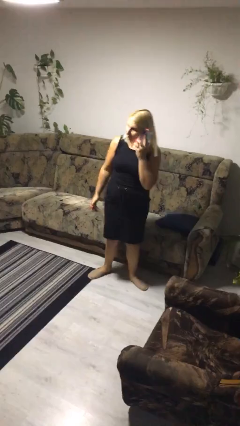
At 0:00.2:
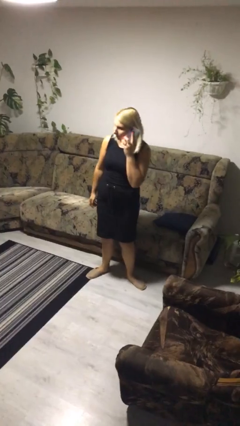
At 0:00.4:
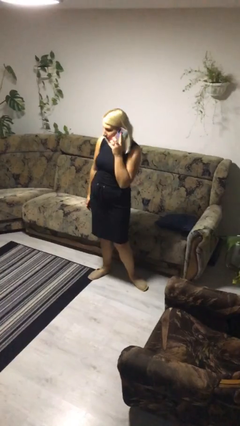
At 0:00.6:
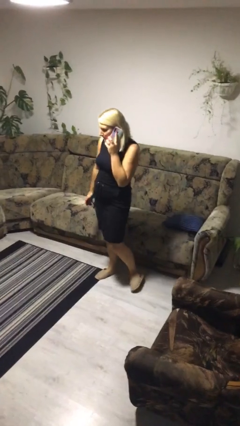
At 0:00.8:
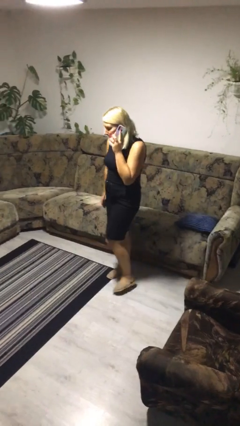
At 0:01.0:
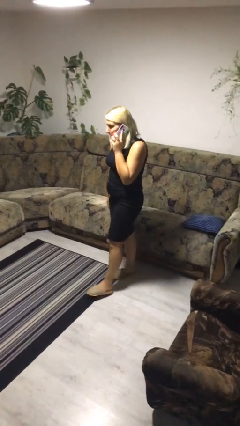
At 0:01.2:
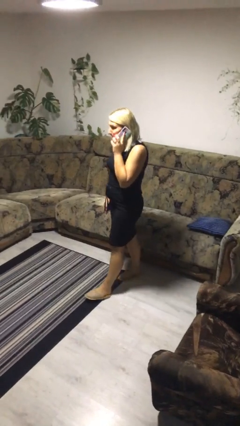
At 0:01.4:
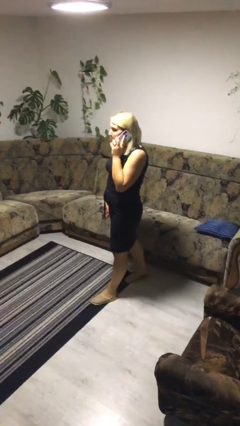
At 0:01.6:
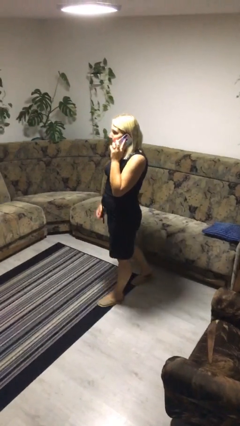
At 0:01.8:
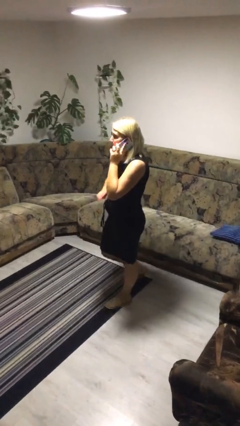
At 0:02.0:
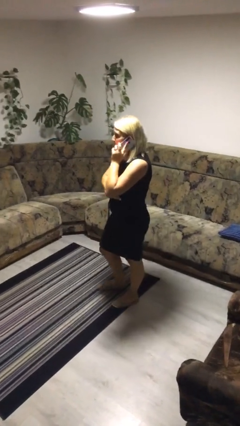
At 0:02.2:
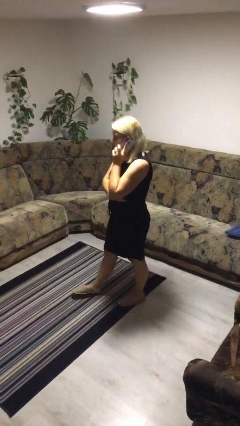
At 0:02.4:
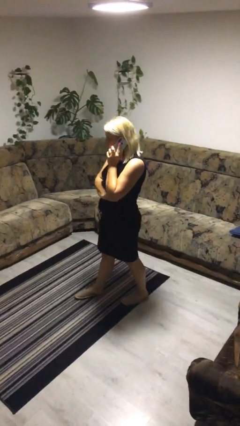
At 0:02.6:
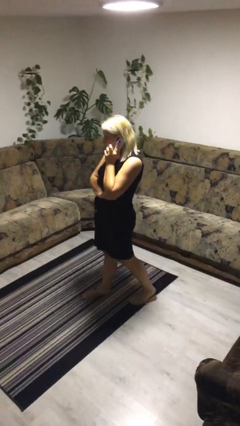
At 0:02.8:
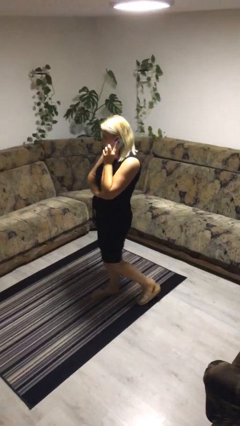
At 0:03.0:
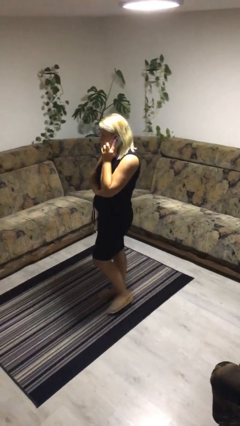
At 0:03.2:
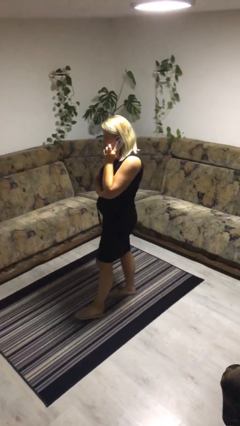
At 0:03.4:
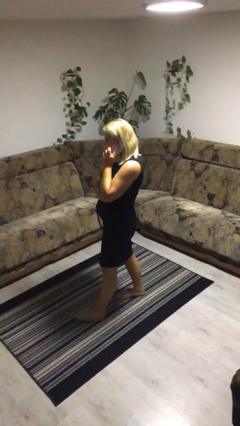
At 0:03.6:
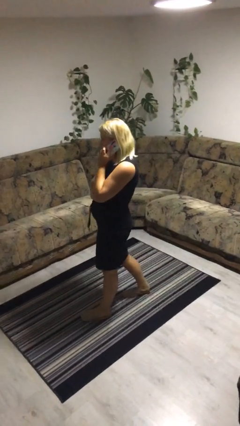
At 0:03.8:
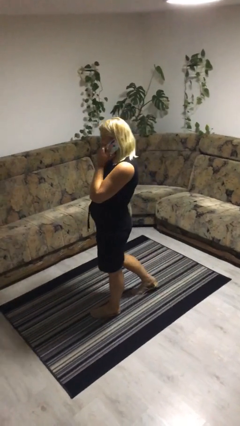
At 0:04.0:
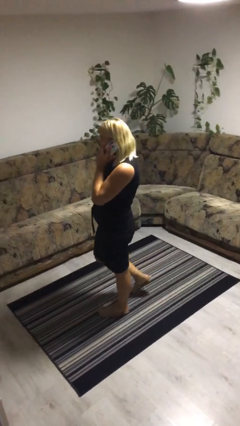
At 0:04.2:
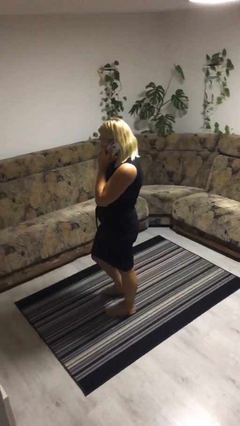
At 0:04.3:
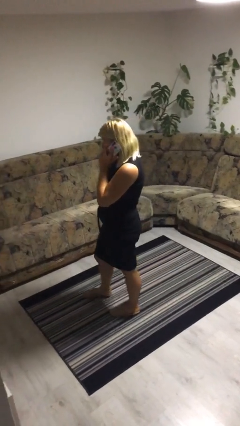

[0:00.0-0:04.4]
person talks on phone

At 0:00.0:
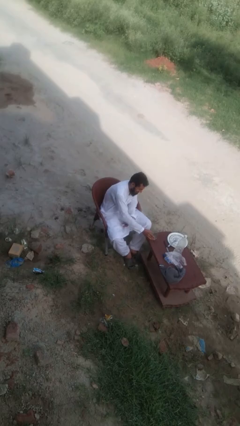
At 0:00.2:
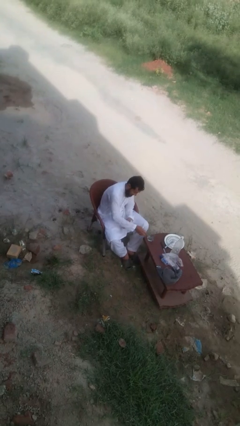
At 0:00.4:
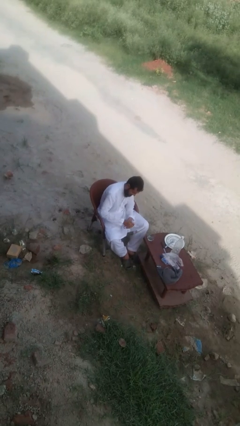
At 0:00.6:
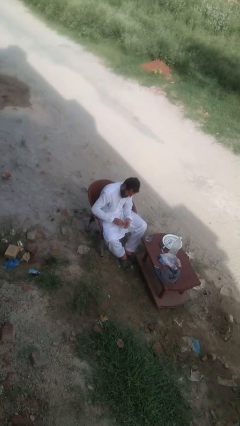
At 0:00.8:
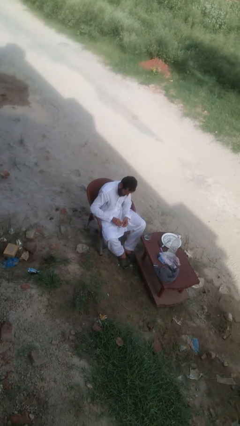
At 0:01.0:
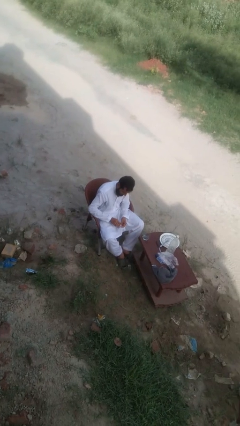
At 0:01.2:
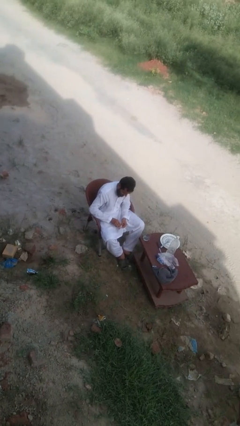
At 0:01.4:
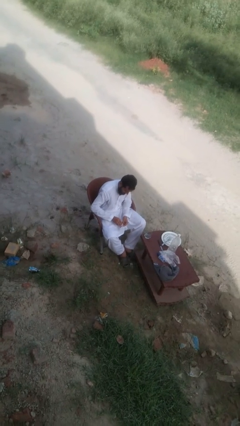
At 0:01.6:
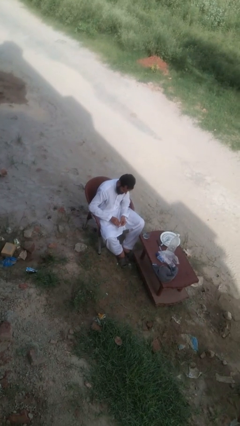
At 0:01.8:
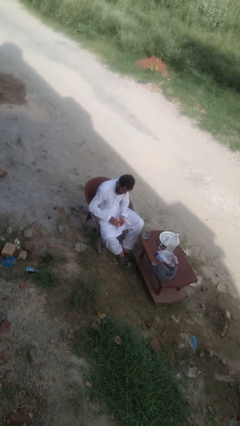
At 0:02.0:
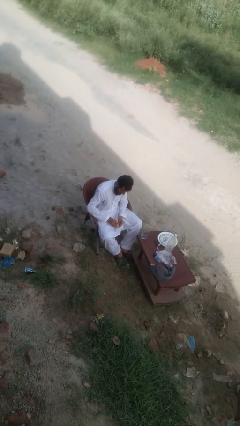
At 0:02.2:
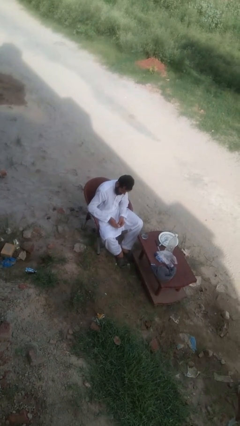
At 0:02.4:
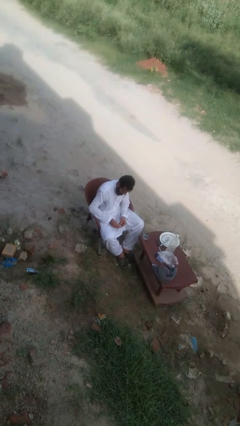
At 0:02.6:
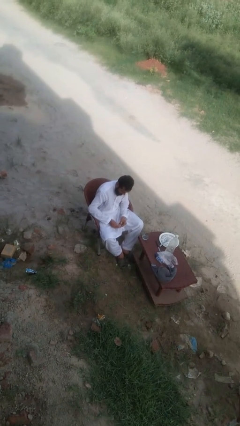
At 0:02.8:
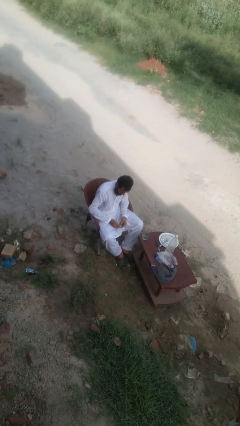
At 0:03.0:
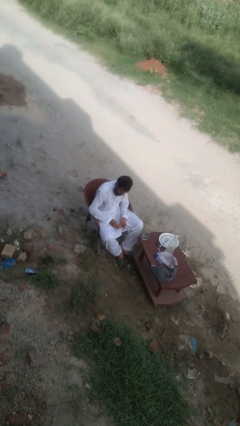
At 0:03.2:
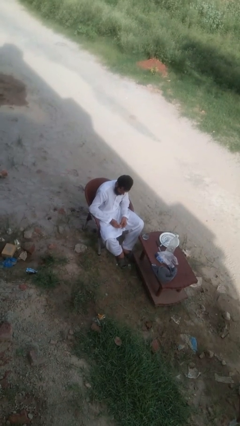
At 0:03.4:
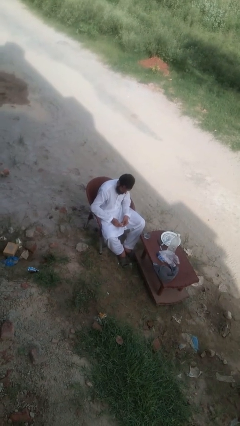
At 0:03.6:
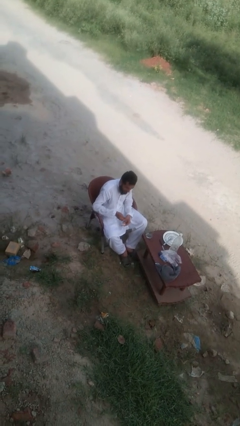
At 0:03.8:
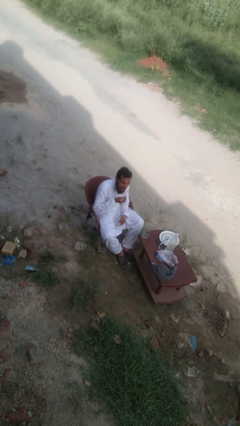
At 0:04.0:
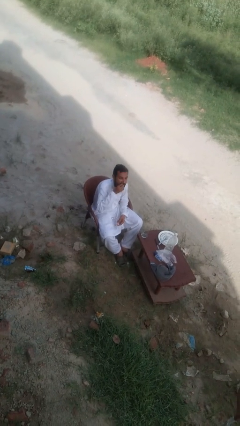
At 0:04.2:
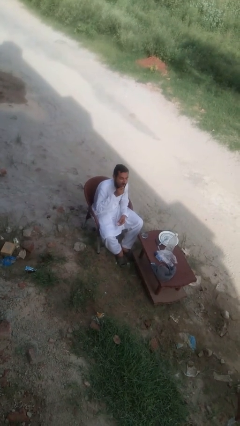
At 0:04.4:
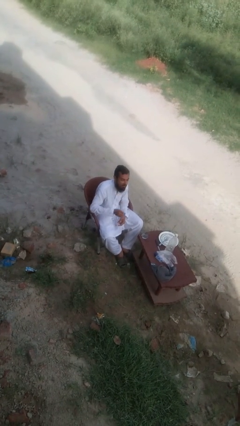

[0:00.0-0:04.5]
person takes medicine pills

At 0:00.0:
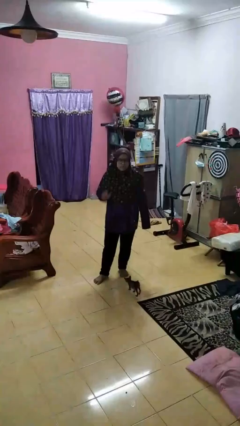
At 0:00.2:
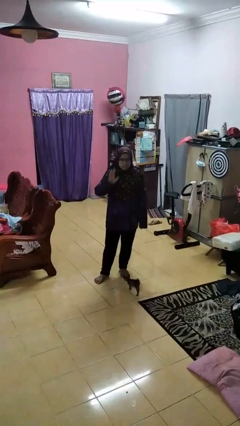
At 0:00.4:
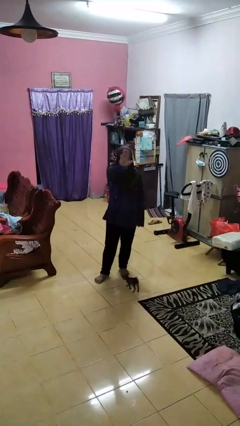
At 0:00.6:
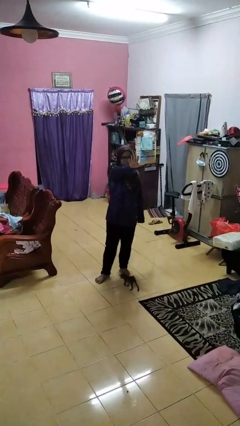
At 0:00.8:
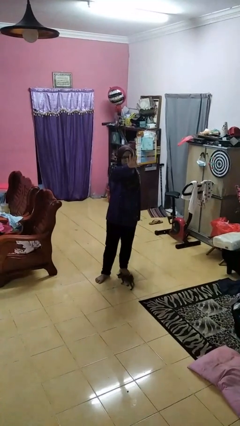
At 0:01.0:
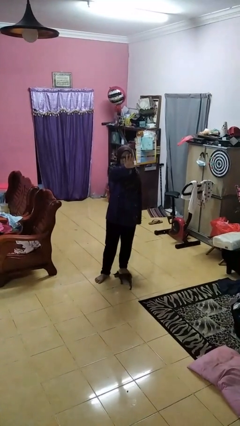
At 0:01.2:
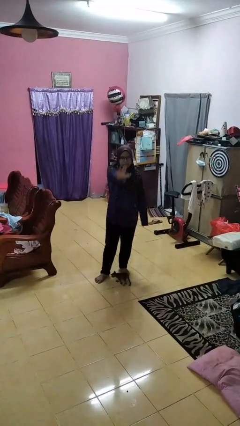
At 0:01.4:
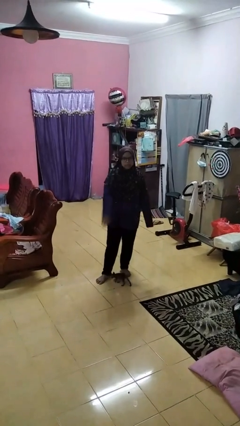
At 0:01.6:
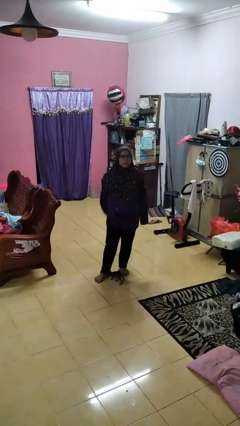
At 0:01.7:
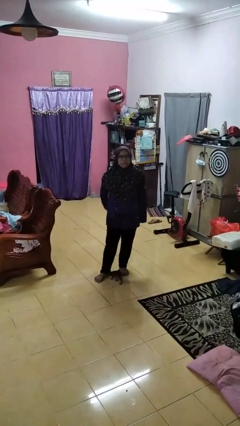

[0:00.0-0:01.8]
person gestures stop

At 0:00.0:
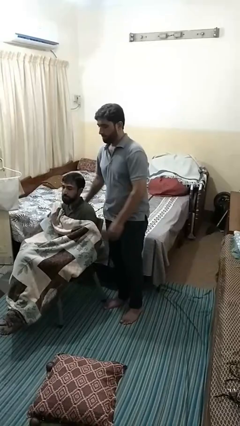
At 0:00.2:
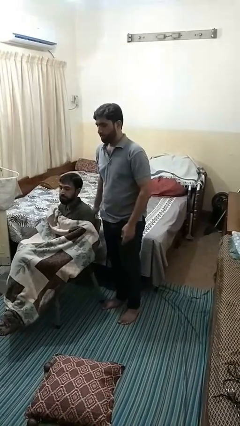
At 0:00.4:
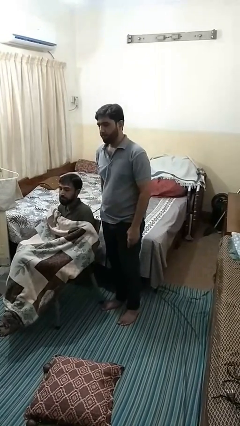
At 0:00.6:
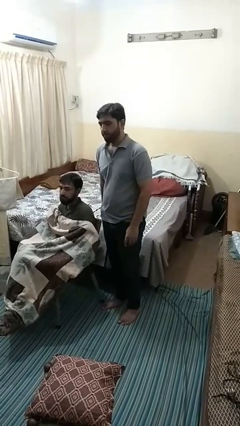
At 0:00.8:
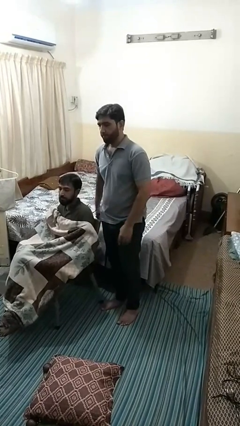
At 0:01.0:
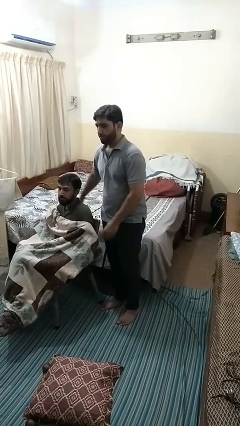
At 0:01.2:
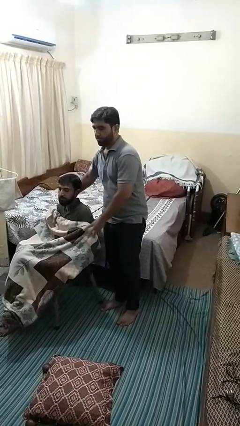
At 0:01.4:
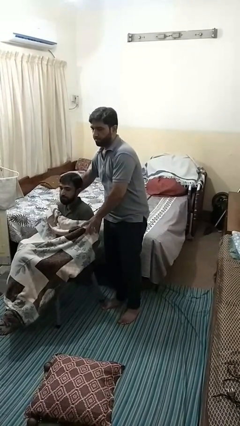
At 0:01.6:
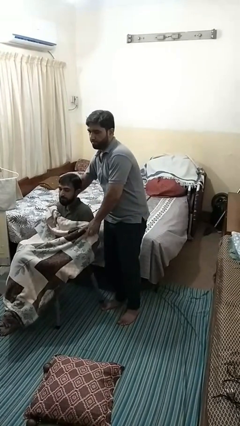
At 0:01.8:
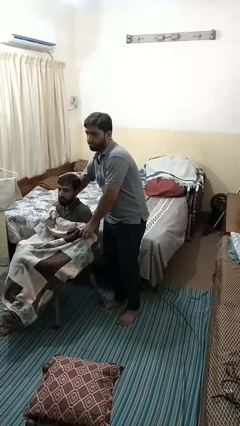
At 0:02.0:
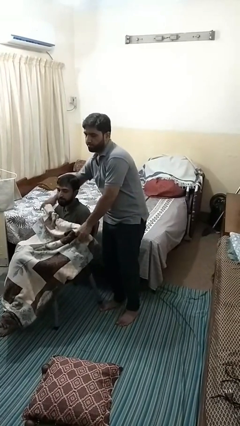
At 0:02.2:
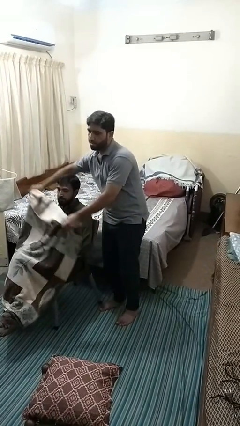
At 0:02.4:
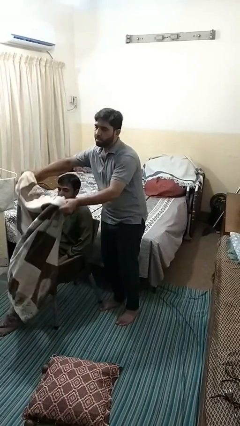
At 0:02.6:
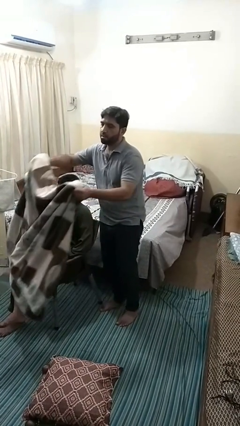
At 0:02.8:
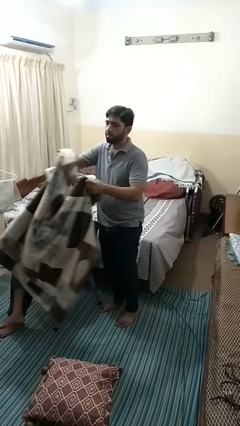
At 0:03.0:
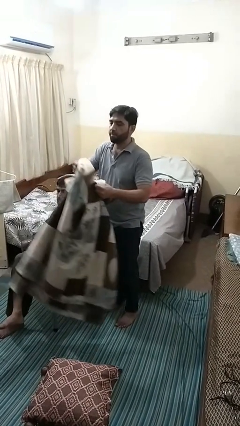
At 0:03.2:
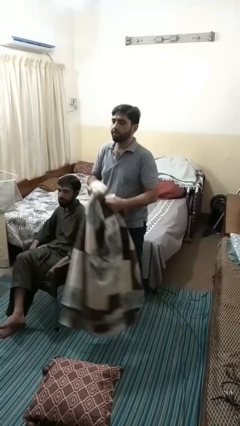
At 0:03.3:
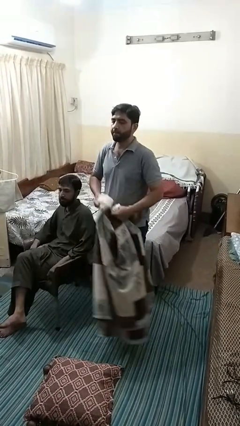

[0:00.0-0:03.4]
person uncovers friend with blanket

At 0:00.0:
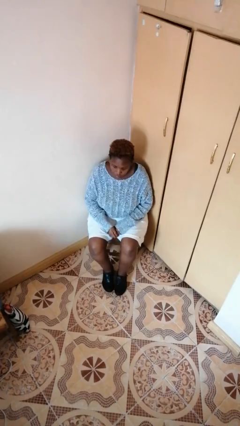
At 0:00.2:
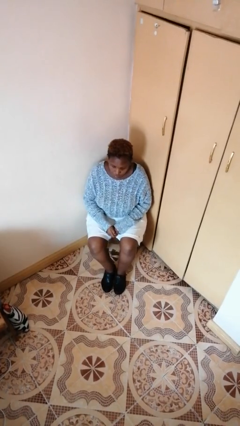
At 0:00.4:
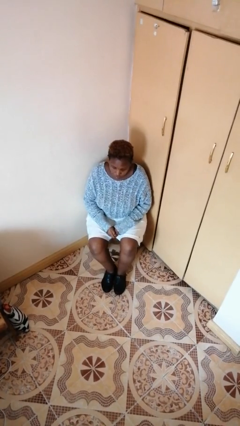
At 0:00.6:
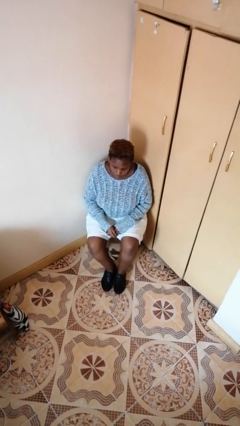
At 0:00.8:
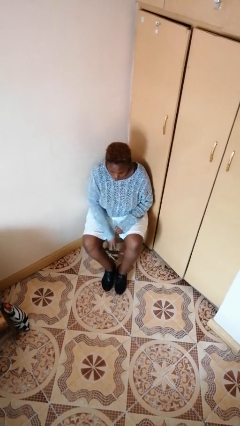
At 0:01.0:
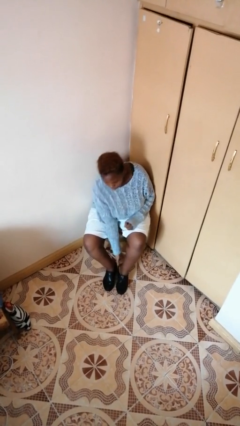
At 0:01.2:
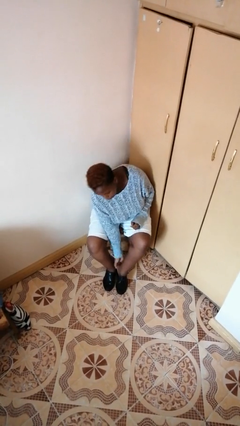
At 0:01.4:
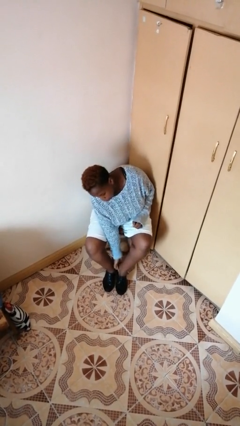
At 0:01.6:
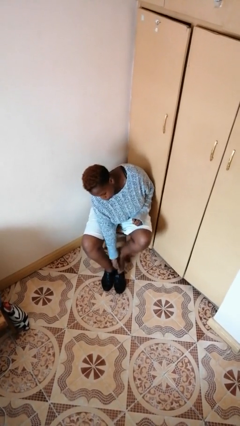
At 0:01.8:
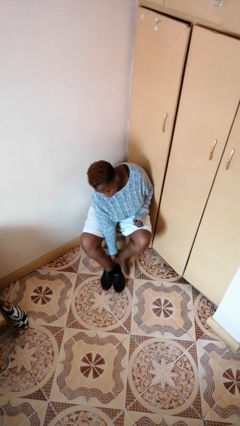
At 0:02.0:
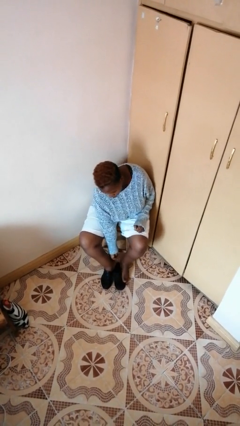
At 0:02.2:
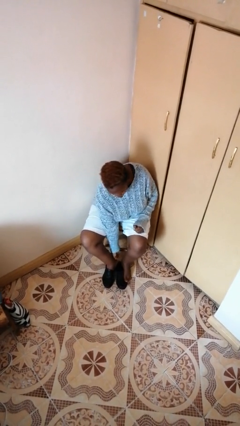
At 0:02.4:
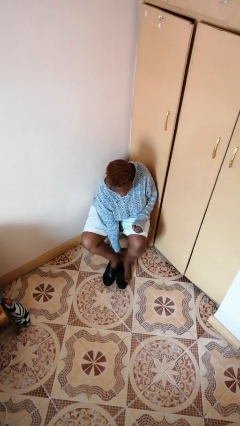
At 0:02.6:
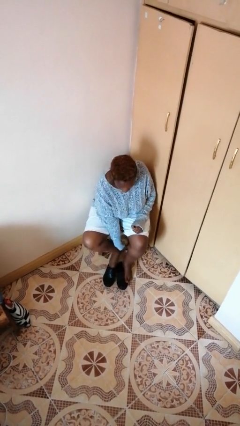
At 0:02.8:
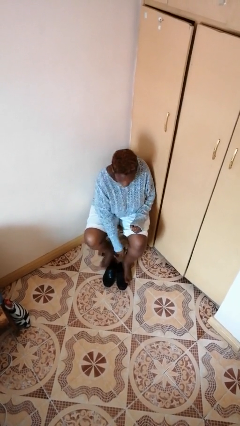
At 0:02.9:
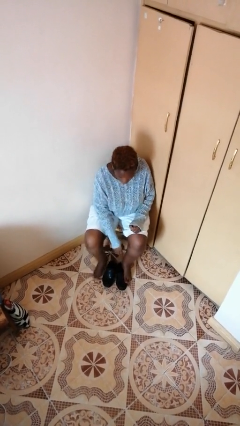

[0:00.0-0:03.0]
person takes off shoes

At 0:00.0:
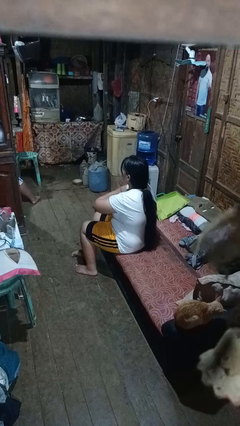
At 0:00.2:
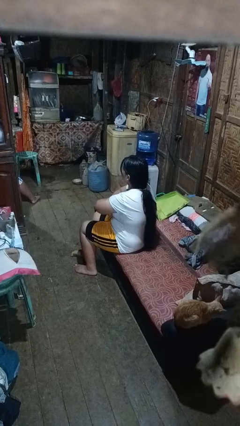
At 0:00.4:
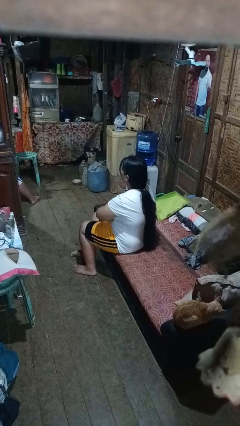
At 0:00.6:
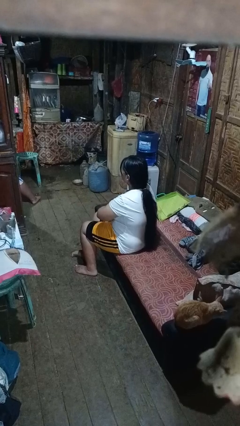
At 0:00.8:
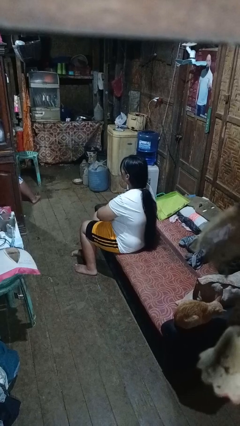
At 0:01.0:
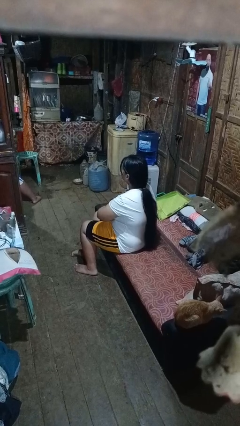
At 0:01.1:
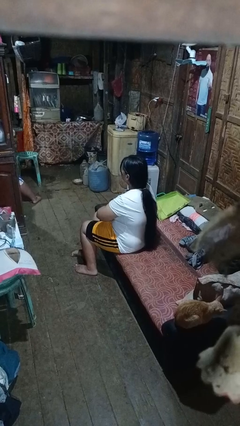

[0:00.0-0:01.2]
person gestures arms x
